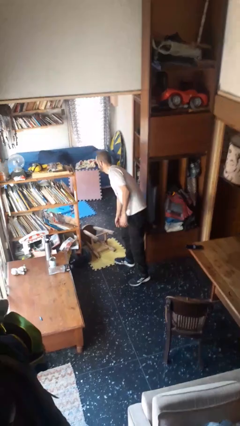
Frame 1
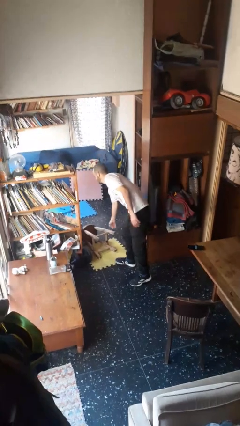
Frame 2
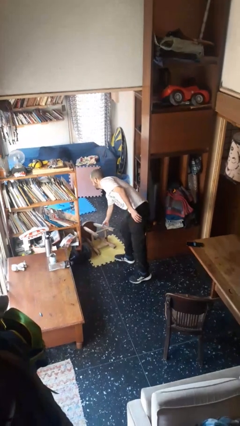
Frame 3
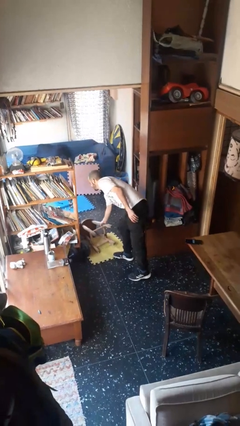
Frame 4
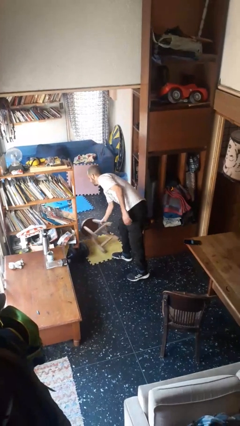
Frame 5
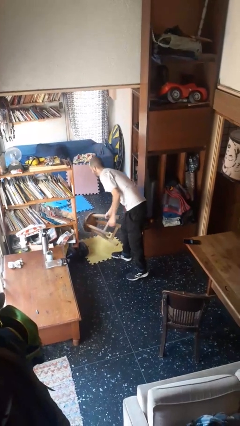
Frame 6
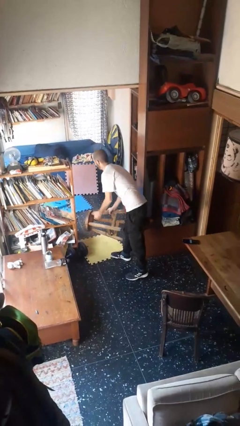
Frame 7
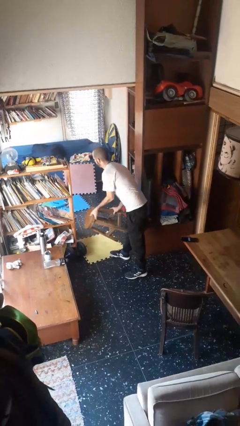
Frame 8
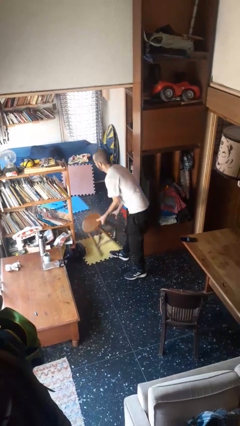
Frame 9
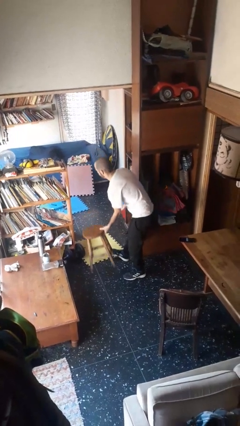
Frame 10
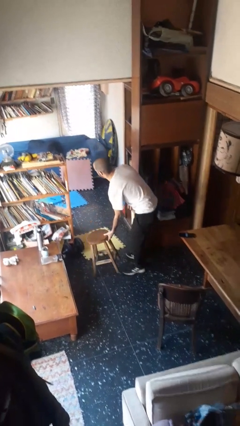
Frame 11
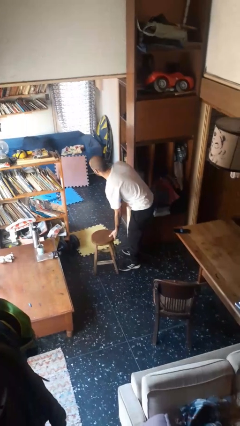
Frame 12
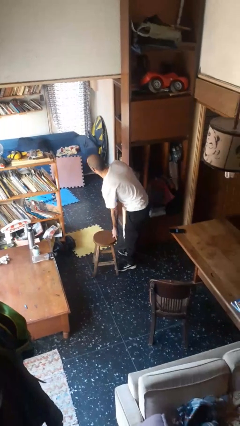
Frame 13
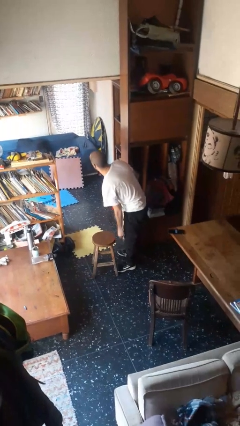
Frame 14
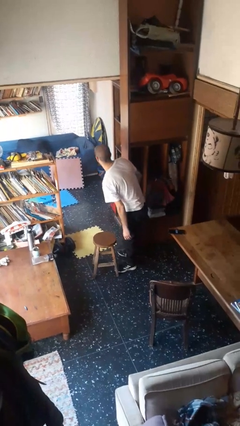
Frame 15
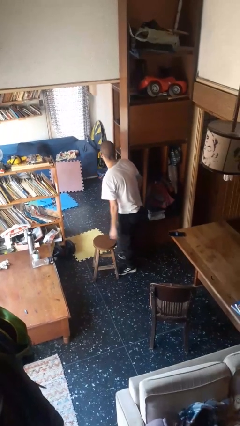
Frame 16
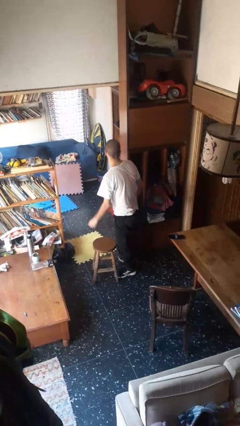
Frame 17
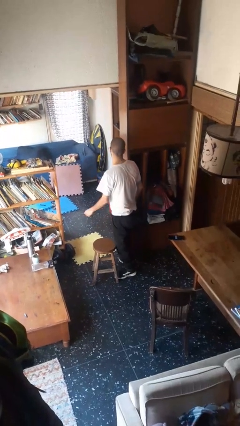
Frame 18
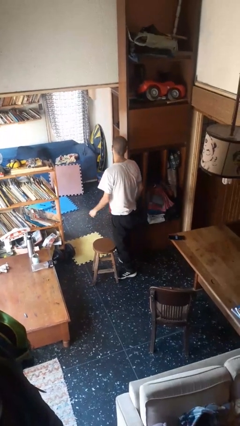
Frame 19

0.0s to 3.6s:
person sets upright furniture

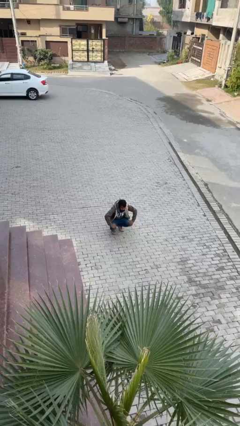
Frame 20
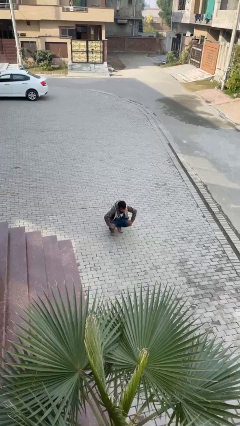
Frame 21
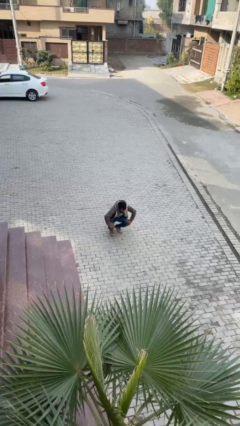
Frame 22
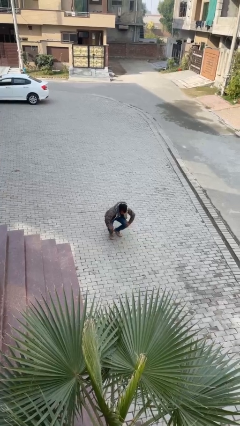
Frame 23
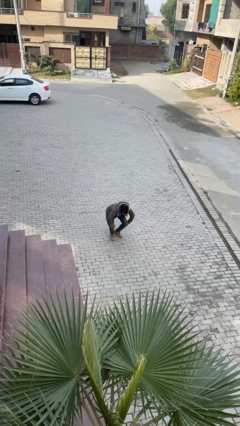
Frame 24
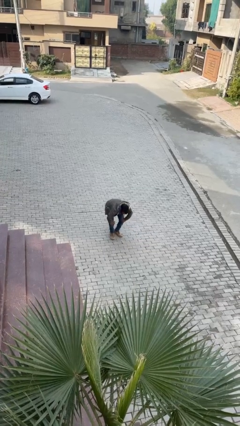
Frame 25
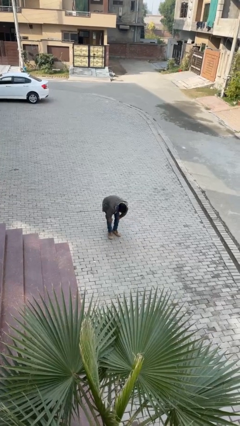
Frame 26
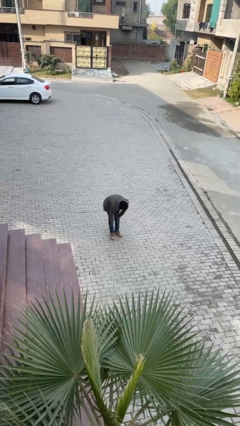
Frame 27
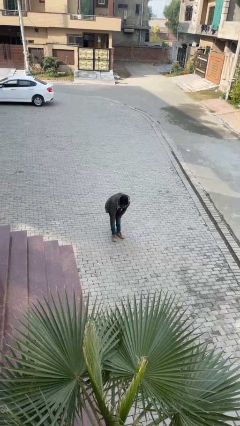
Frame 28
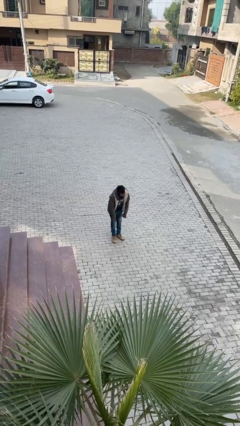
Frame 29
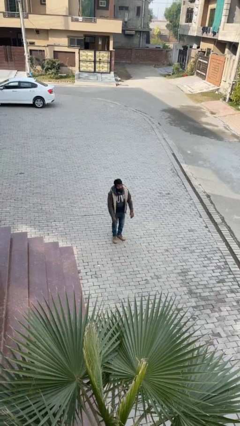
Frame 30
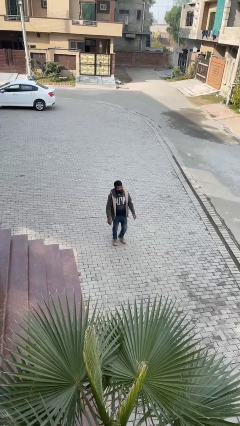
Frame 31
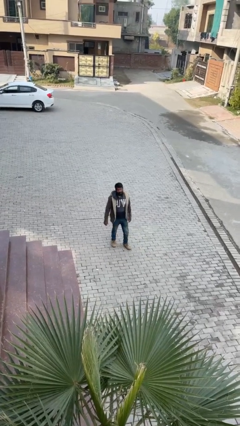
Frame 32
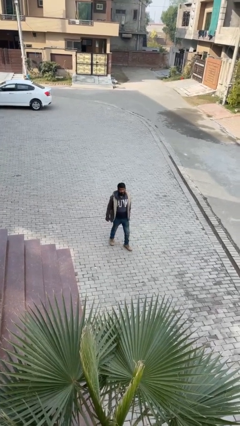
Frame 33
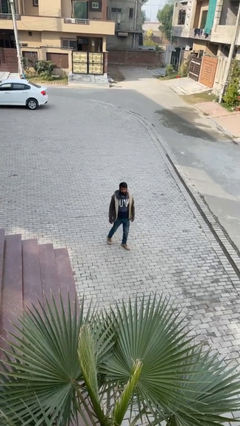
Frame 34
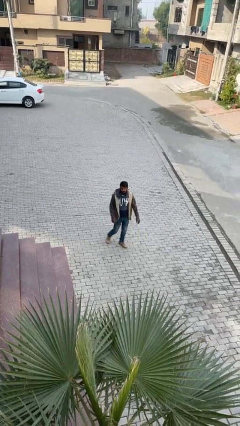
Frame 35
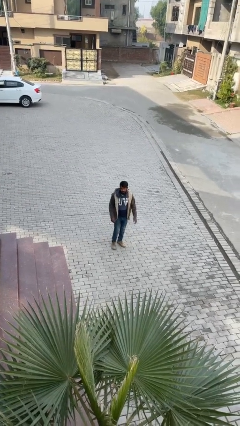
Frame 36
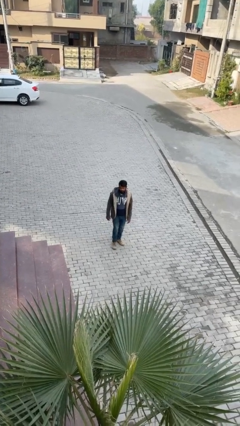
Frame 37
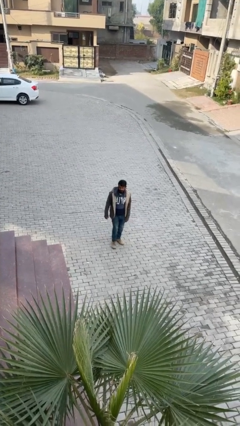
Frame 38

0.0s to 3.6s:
person stands up

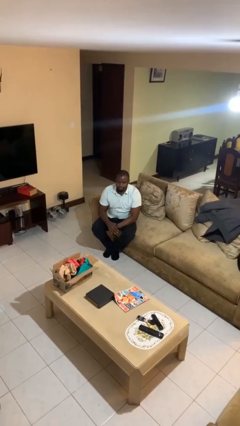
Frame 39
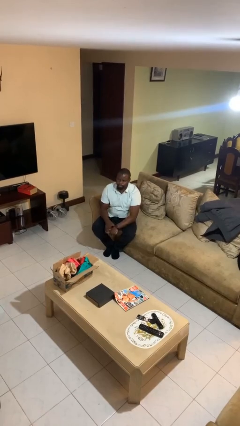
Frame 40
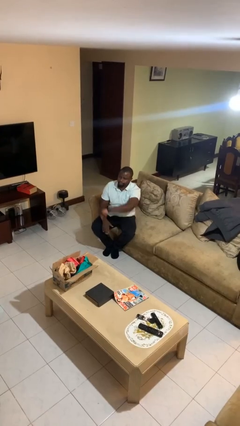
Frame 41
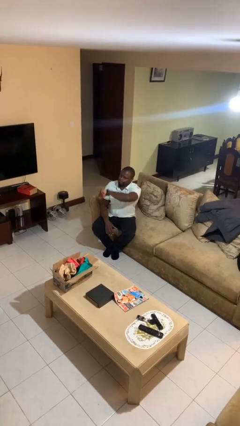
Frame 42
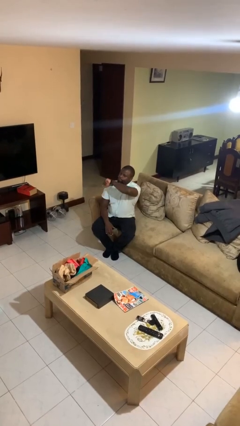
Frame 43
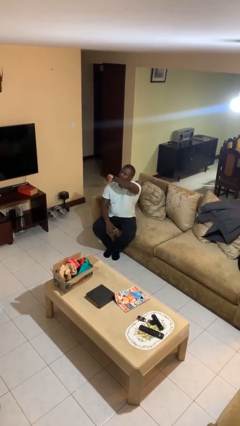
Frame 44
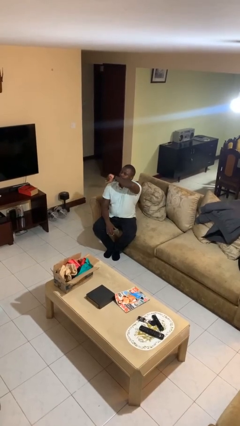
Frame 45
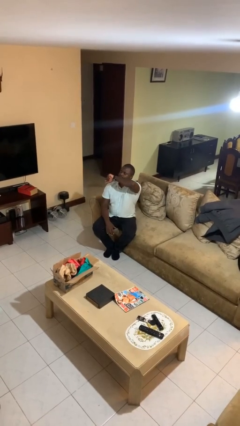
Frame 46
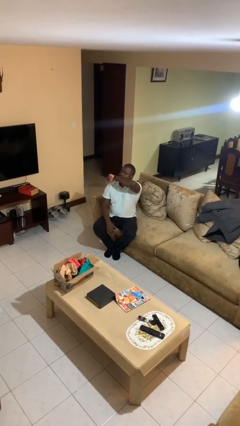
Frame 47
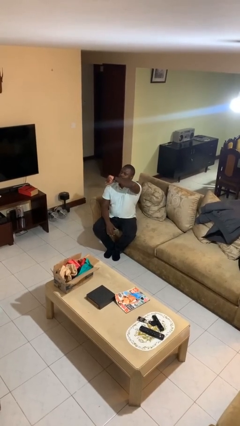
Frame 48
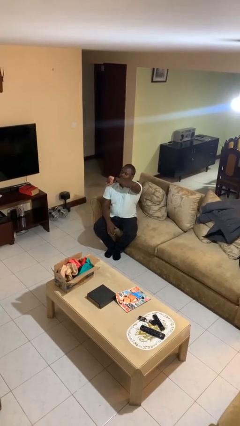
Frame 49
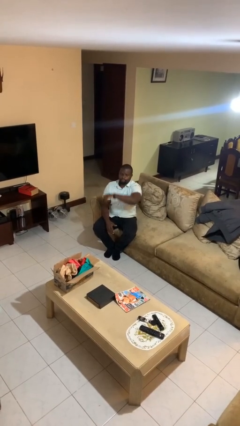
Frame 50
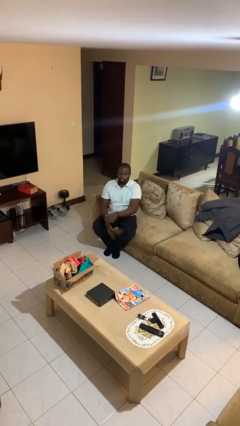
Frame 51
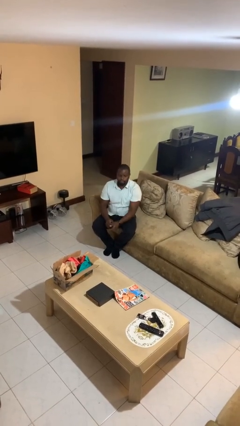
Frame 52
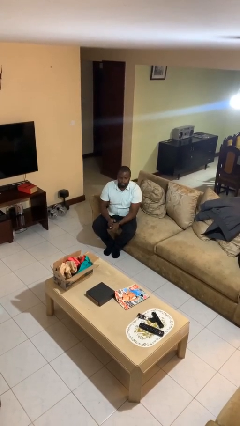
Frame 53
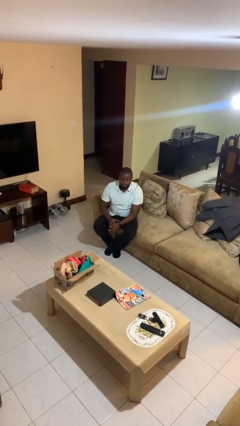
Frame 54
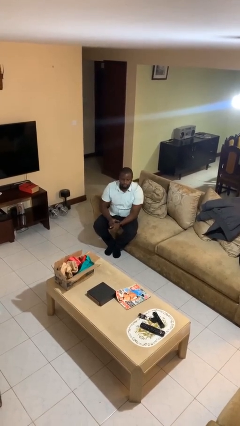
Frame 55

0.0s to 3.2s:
person looks at wristwatch

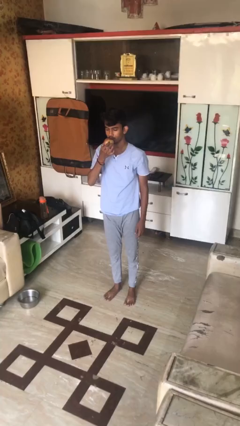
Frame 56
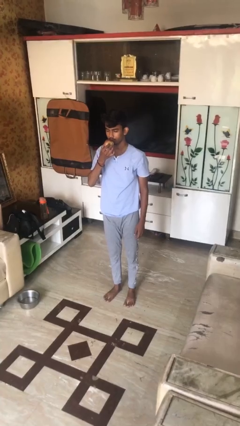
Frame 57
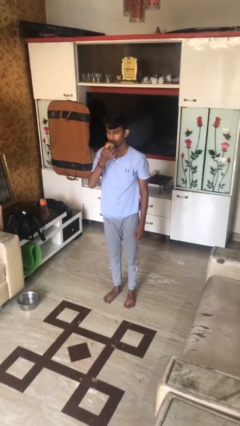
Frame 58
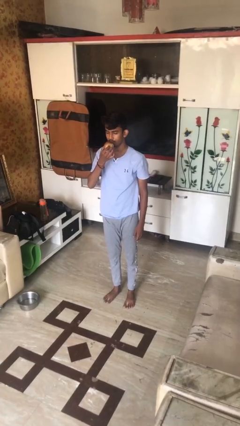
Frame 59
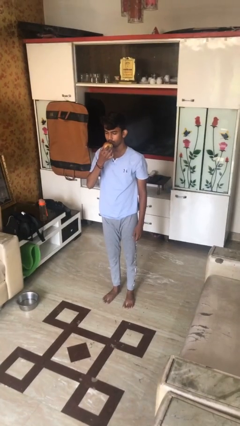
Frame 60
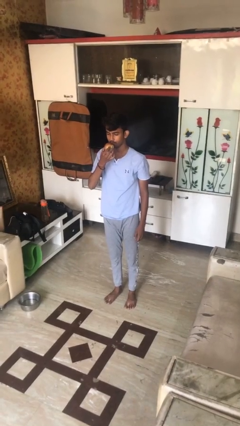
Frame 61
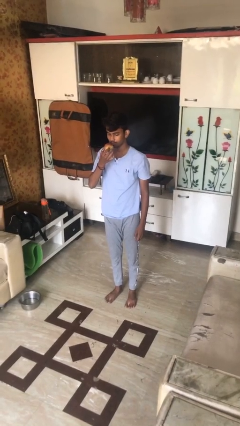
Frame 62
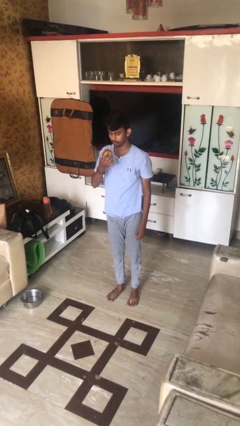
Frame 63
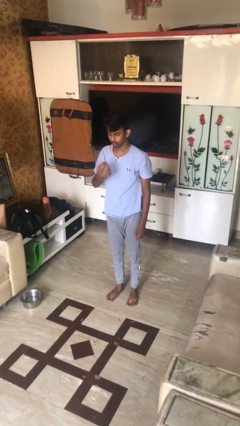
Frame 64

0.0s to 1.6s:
person eats apple

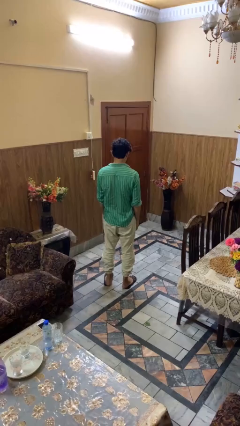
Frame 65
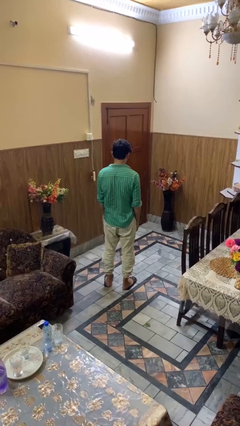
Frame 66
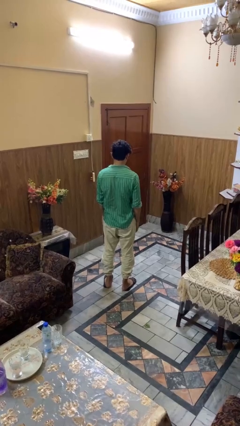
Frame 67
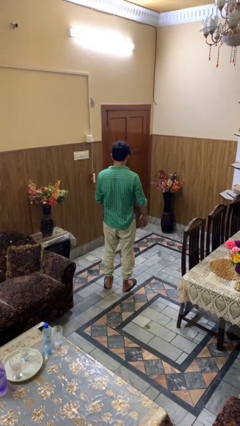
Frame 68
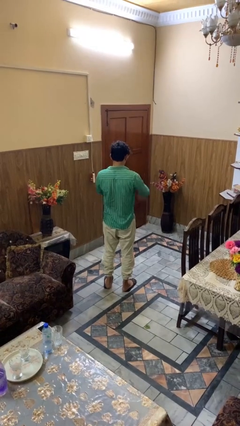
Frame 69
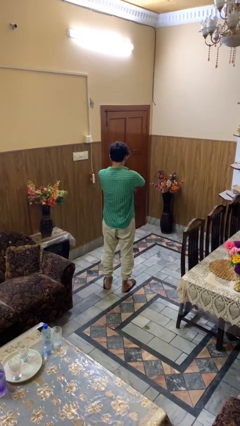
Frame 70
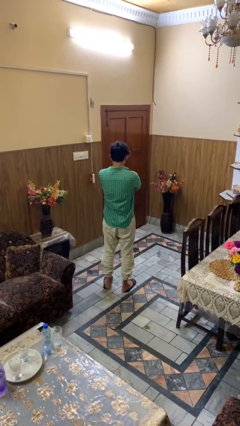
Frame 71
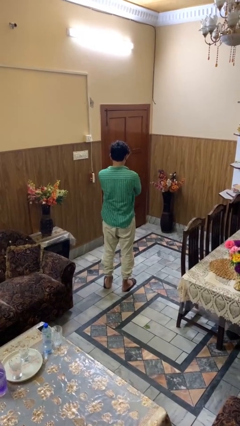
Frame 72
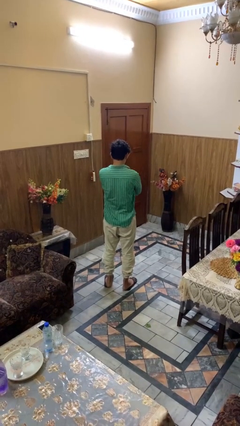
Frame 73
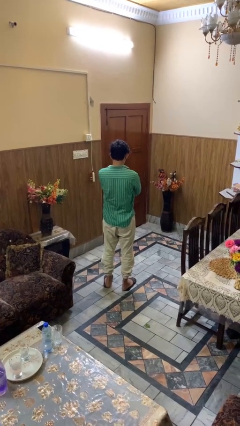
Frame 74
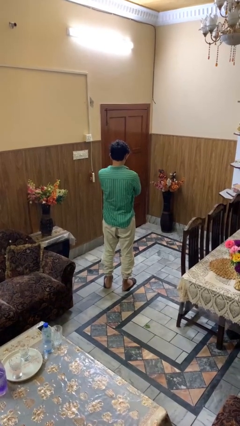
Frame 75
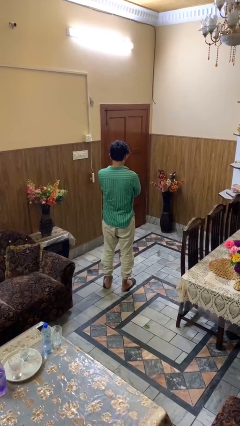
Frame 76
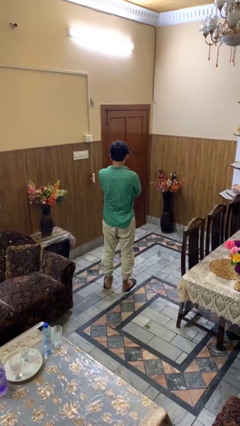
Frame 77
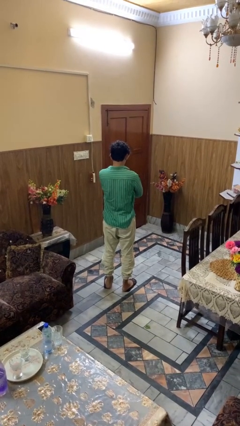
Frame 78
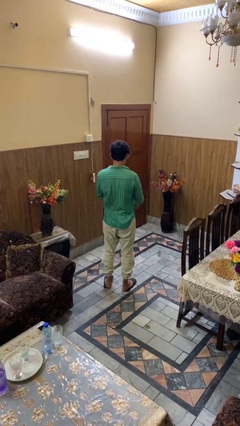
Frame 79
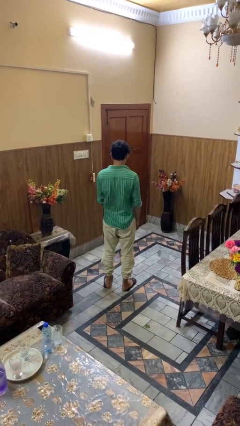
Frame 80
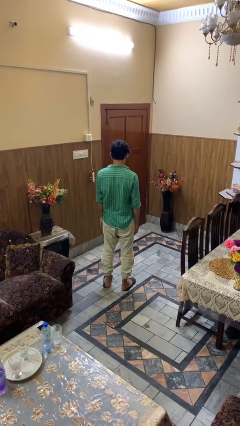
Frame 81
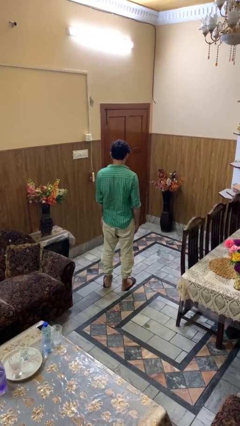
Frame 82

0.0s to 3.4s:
person crosses arms

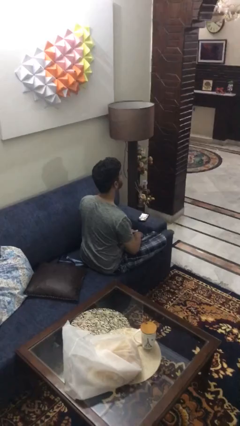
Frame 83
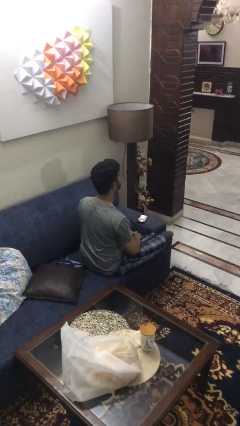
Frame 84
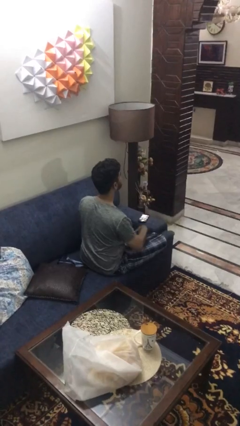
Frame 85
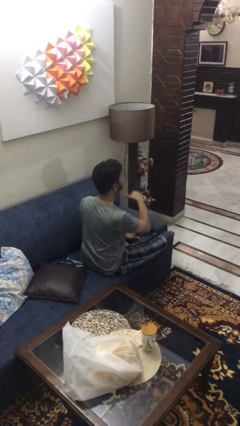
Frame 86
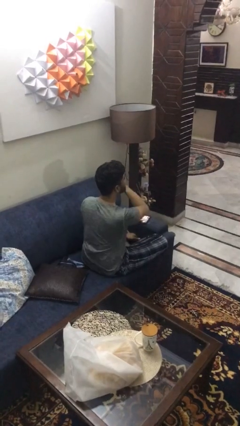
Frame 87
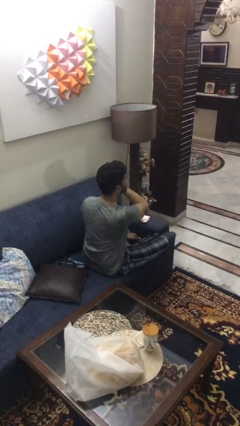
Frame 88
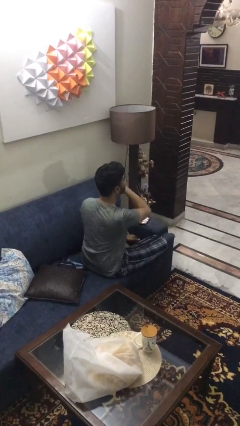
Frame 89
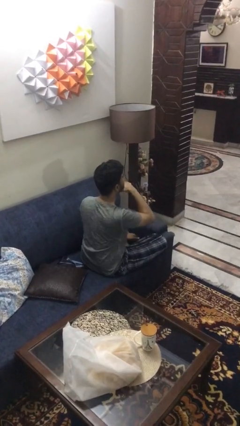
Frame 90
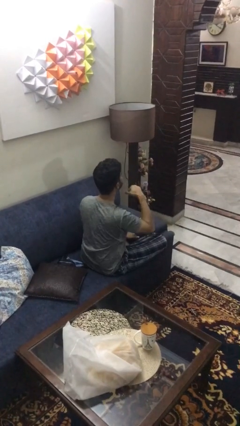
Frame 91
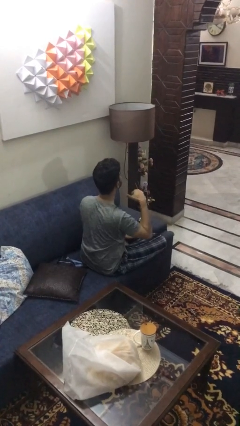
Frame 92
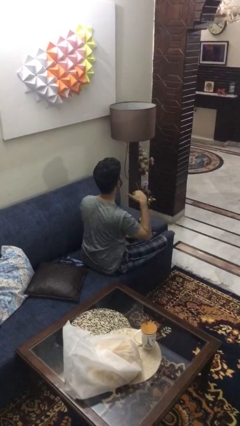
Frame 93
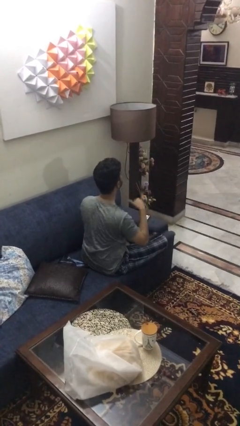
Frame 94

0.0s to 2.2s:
person gestures cut
